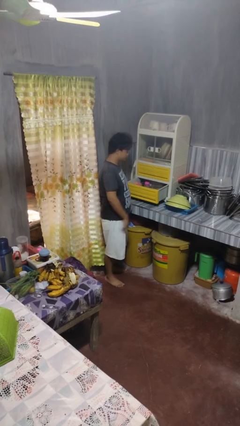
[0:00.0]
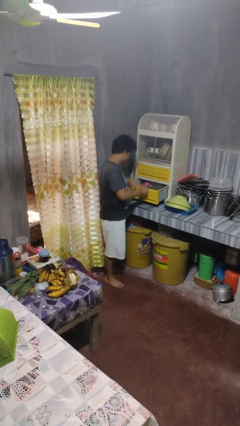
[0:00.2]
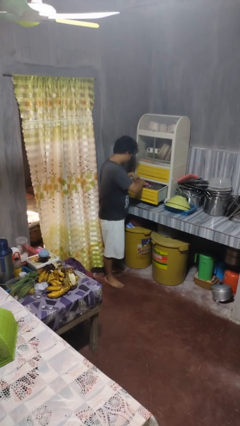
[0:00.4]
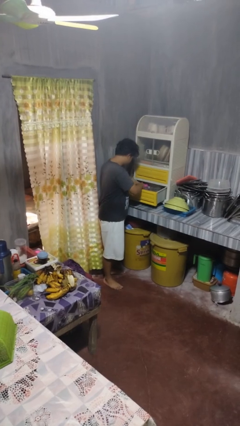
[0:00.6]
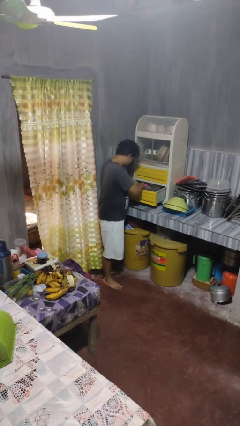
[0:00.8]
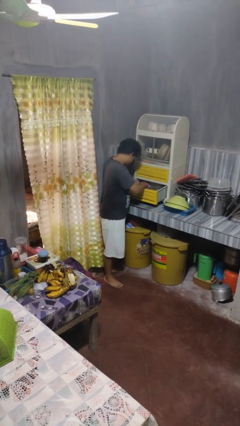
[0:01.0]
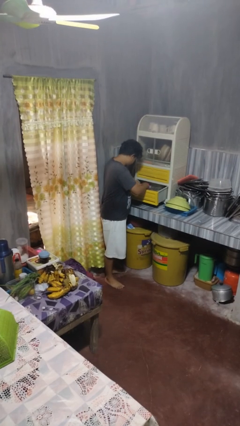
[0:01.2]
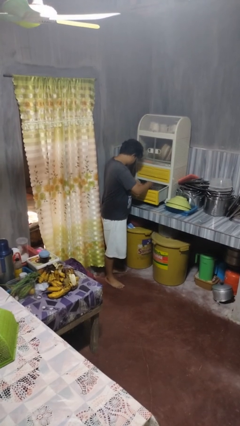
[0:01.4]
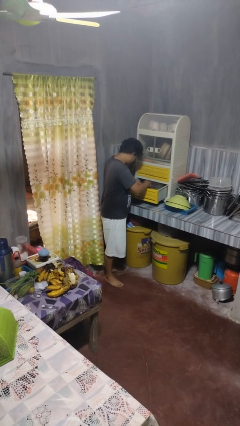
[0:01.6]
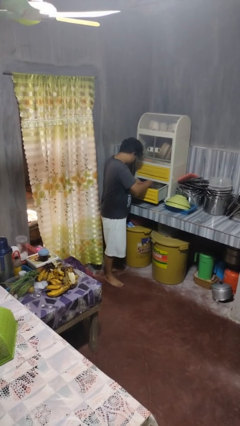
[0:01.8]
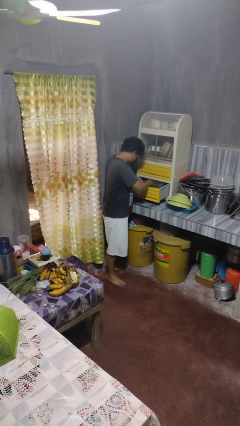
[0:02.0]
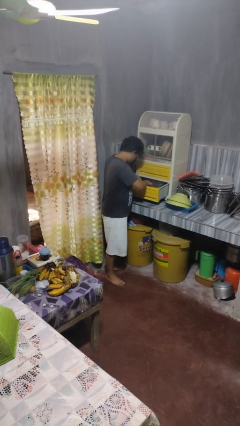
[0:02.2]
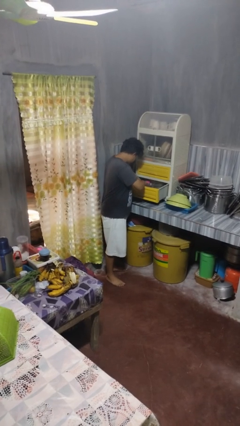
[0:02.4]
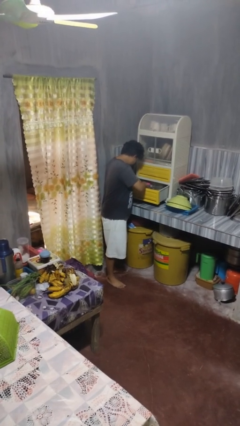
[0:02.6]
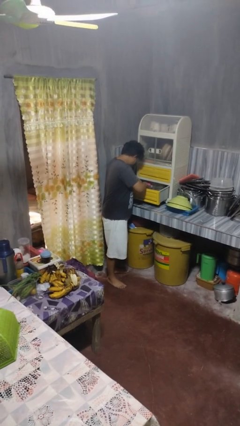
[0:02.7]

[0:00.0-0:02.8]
person searches in kitchen drawer

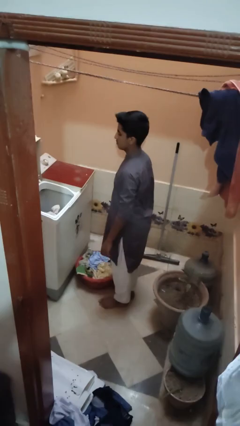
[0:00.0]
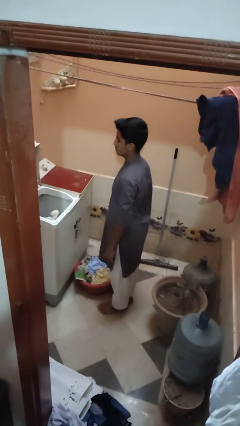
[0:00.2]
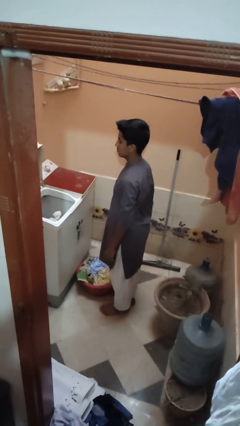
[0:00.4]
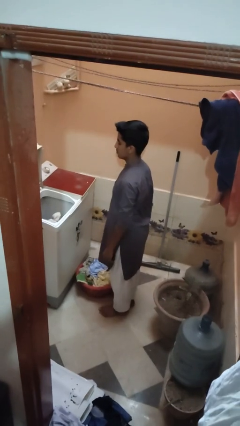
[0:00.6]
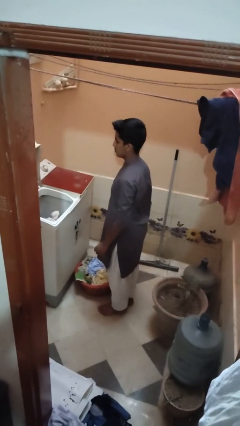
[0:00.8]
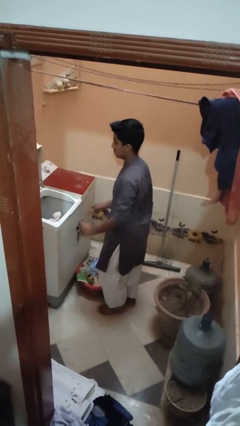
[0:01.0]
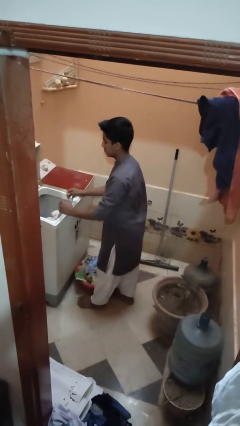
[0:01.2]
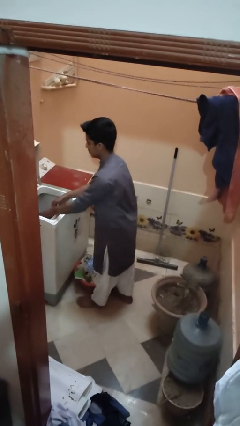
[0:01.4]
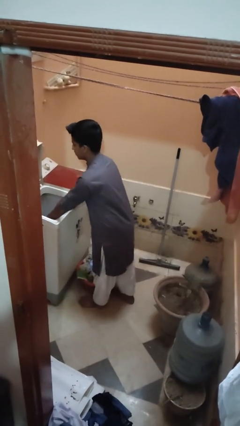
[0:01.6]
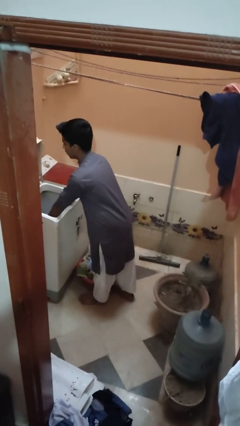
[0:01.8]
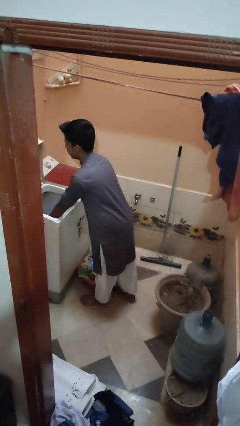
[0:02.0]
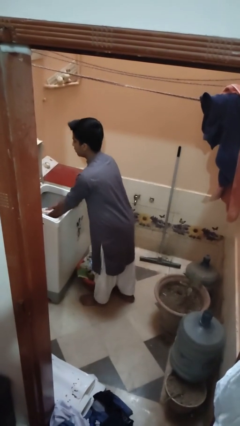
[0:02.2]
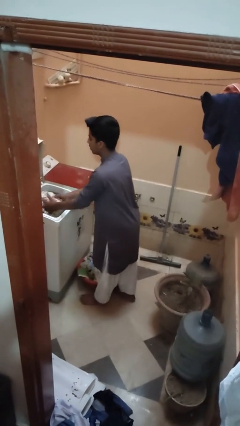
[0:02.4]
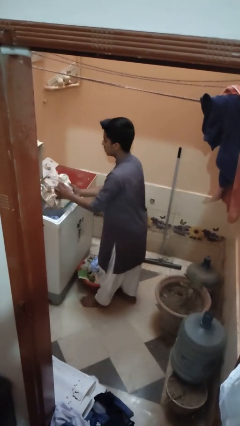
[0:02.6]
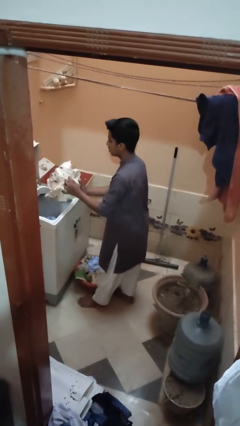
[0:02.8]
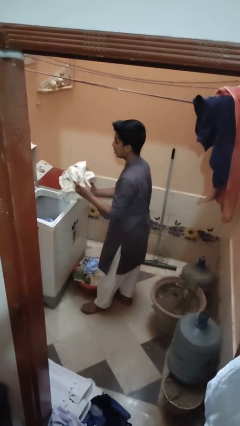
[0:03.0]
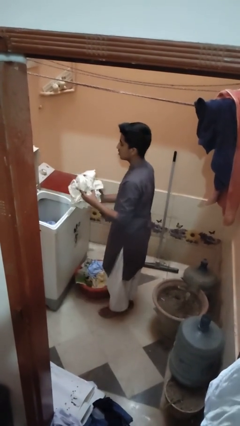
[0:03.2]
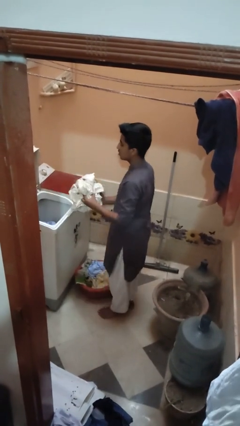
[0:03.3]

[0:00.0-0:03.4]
person unloads clotheswasher

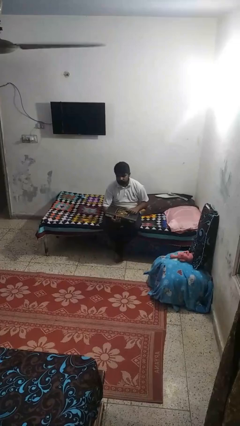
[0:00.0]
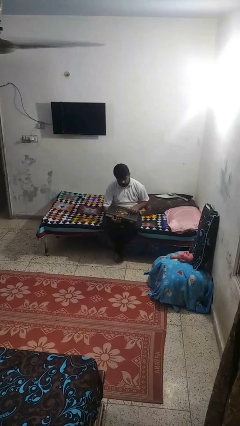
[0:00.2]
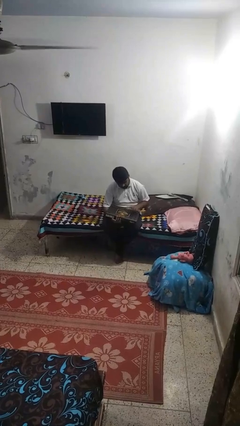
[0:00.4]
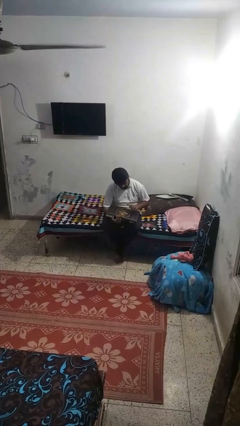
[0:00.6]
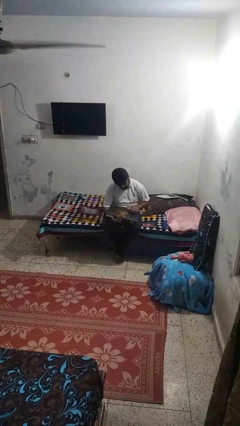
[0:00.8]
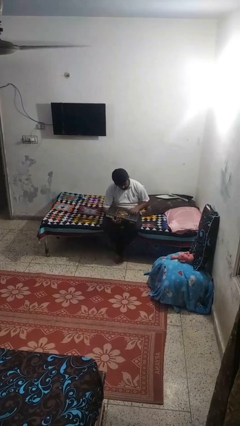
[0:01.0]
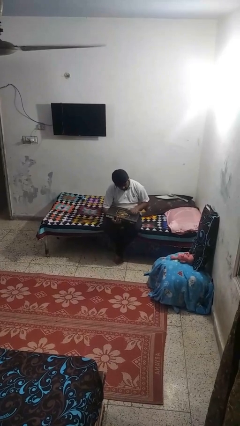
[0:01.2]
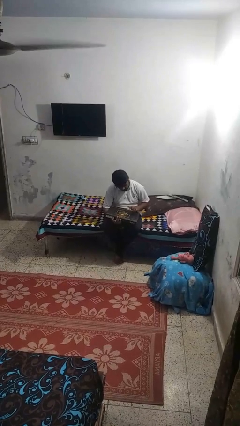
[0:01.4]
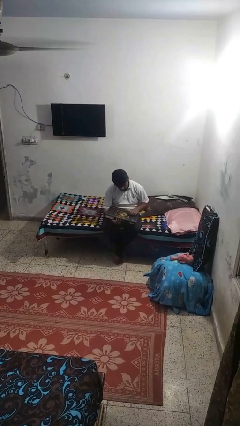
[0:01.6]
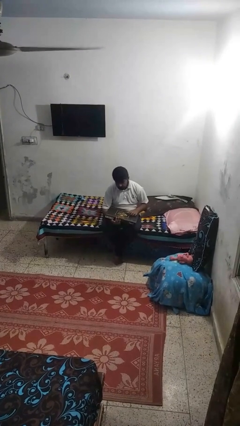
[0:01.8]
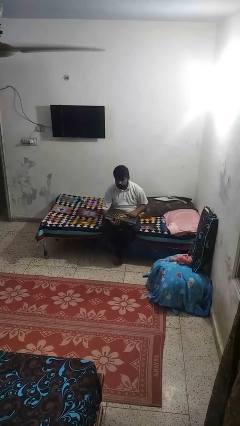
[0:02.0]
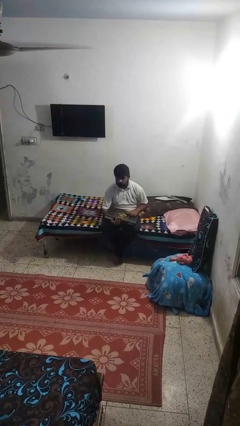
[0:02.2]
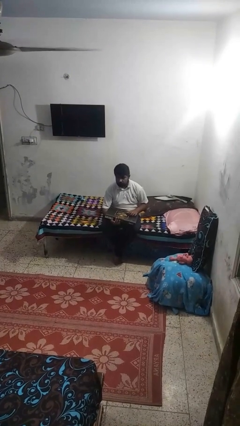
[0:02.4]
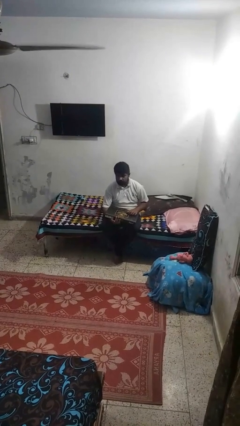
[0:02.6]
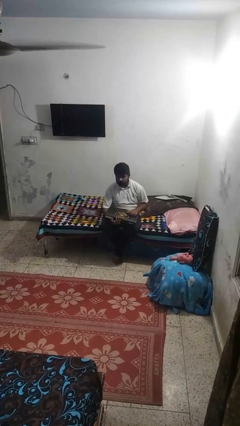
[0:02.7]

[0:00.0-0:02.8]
person taps object with finger

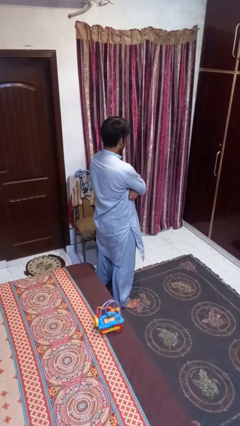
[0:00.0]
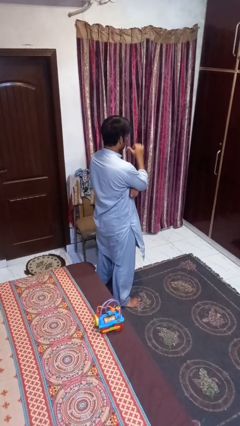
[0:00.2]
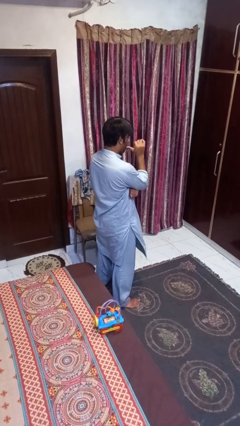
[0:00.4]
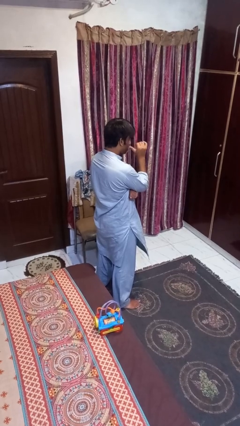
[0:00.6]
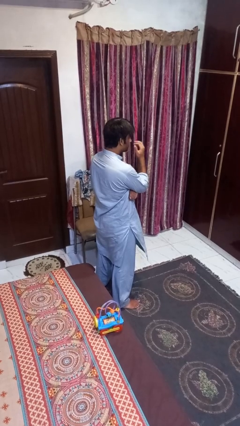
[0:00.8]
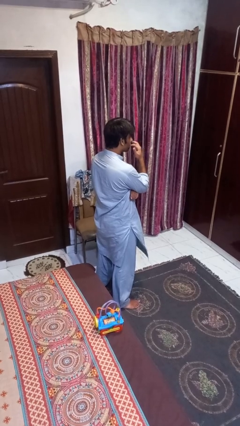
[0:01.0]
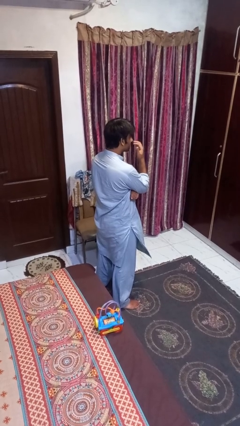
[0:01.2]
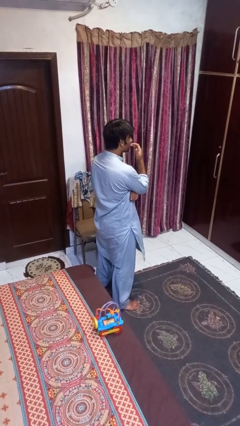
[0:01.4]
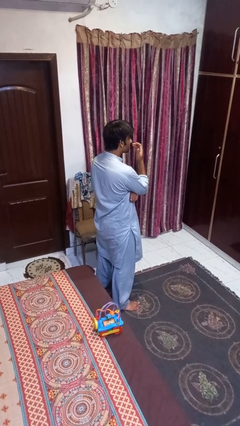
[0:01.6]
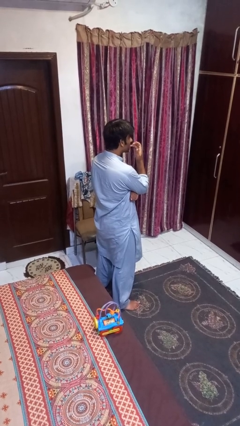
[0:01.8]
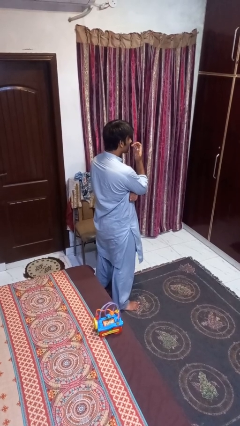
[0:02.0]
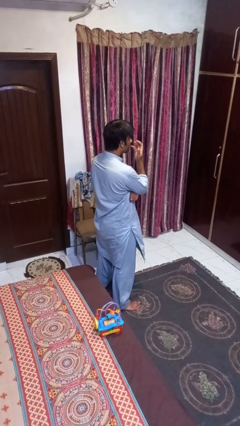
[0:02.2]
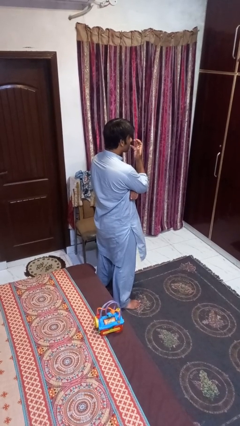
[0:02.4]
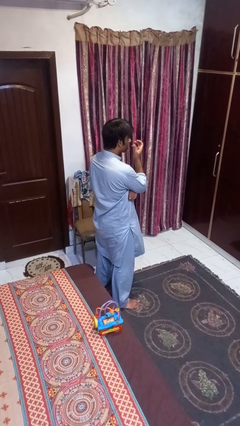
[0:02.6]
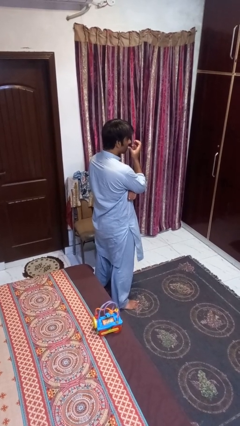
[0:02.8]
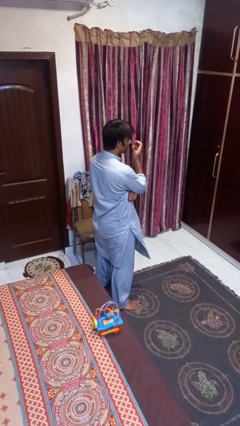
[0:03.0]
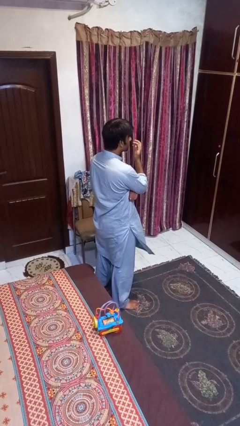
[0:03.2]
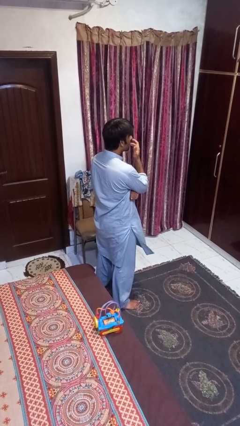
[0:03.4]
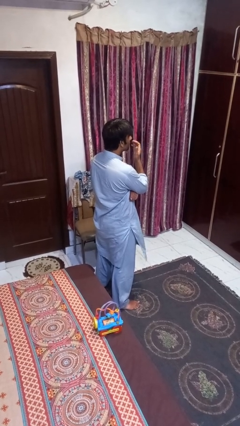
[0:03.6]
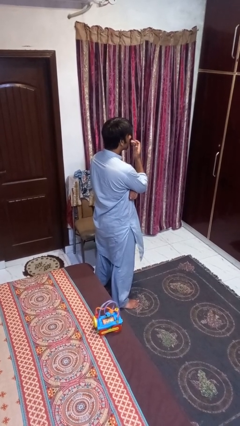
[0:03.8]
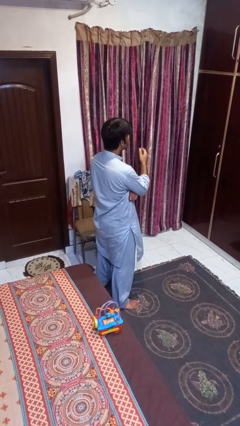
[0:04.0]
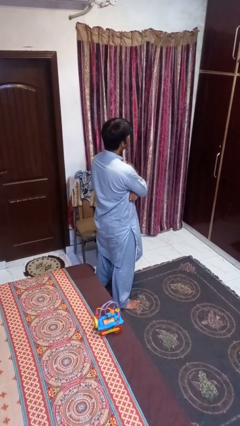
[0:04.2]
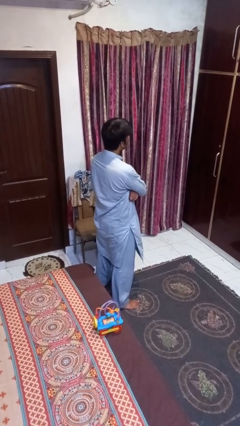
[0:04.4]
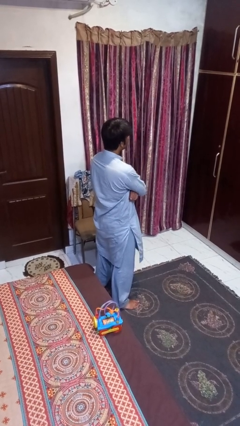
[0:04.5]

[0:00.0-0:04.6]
person licks fingers

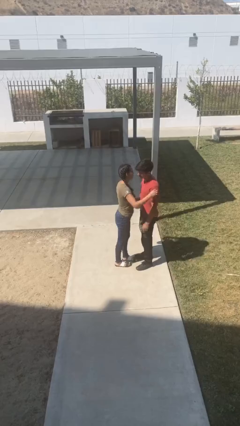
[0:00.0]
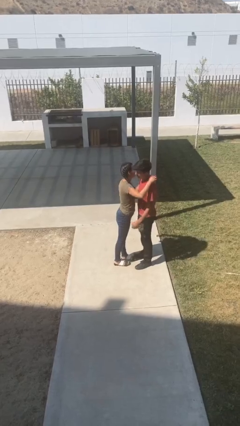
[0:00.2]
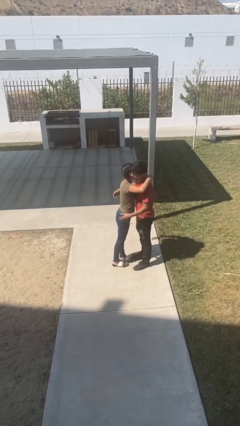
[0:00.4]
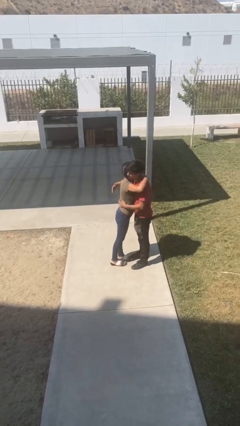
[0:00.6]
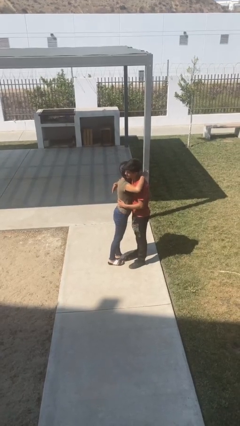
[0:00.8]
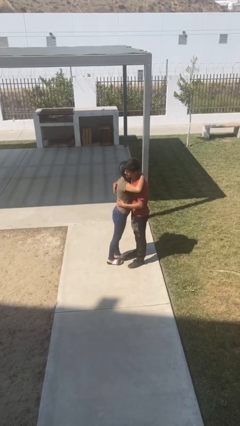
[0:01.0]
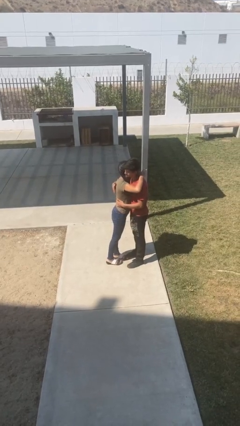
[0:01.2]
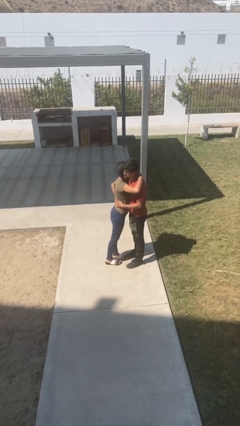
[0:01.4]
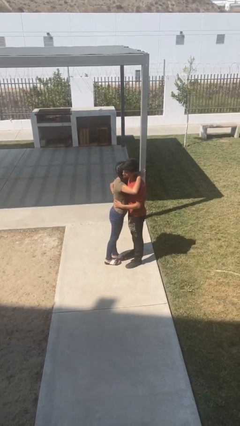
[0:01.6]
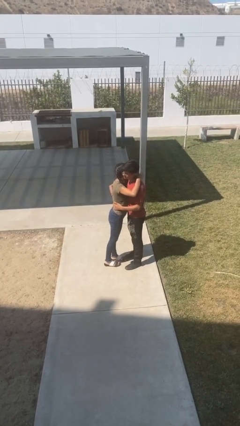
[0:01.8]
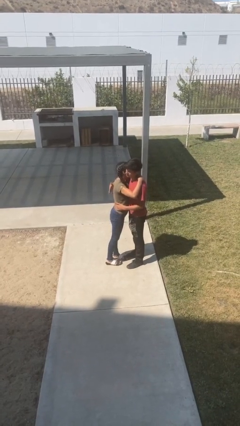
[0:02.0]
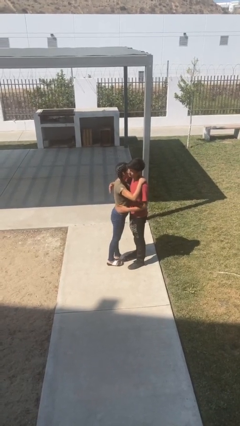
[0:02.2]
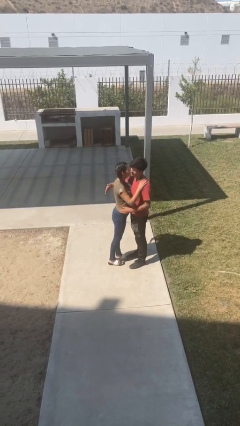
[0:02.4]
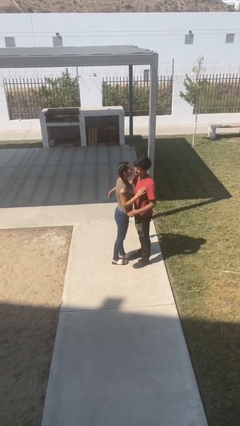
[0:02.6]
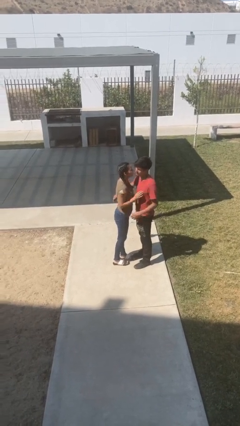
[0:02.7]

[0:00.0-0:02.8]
person embraces person

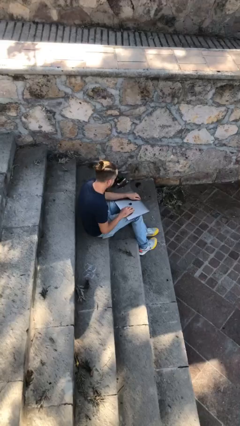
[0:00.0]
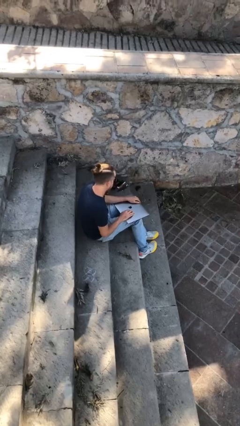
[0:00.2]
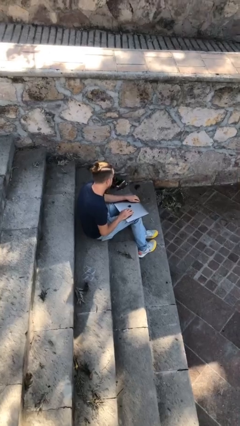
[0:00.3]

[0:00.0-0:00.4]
person interacts with laptop

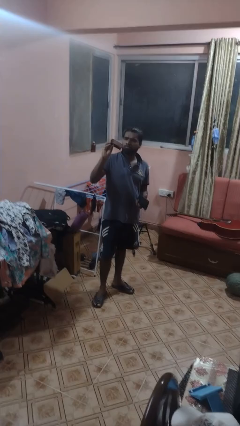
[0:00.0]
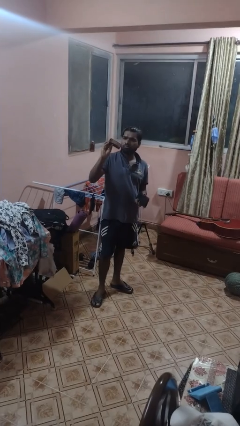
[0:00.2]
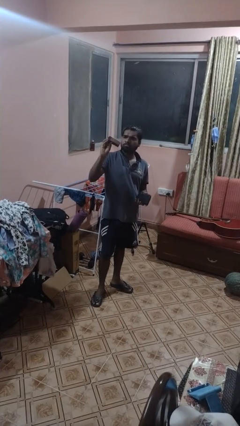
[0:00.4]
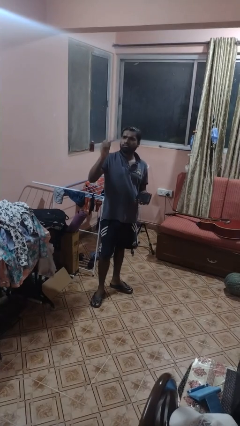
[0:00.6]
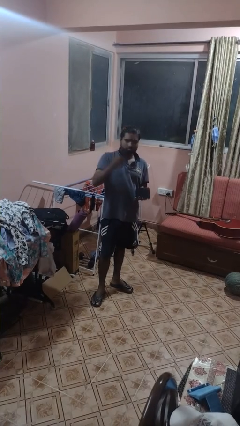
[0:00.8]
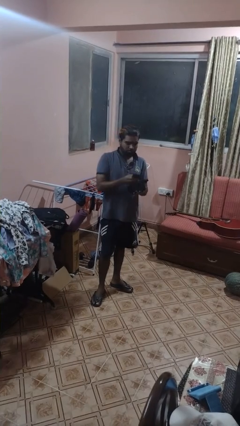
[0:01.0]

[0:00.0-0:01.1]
person takes object from purse
